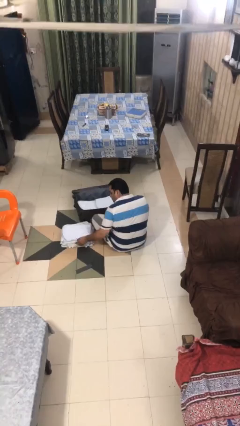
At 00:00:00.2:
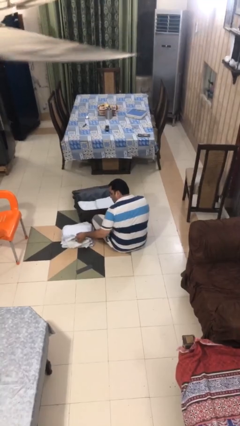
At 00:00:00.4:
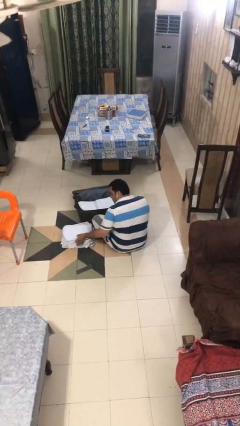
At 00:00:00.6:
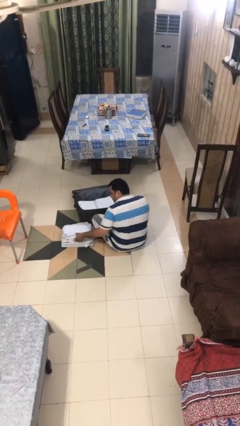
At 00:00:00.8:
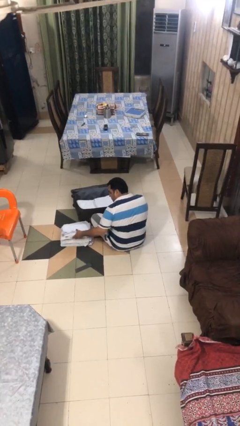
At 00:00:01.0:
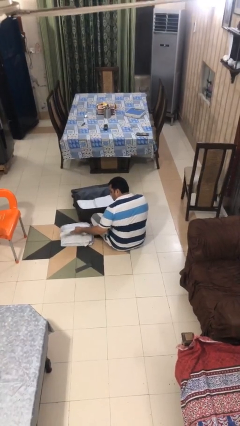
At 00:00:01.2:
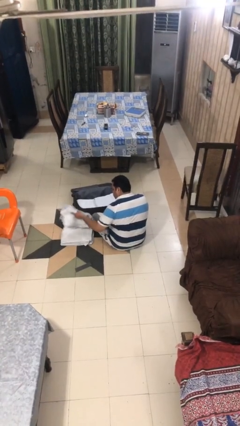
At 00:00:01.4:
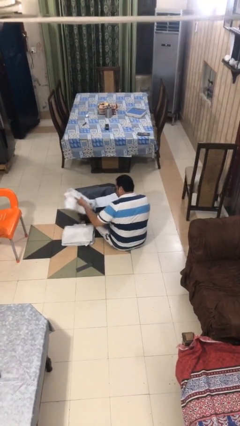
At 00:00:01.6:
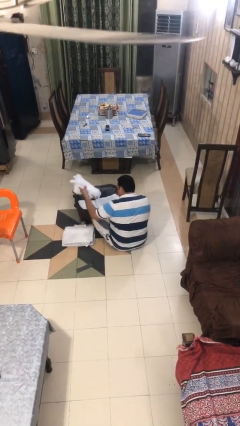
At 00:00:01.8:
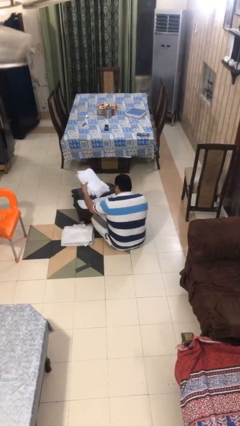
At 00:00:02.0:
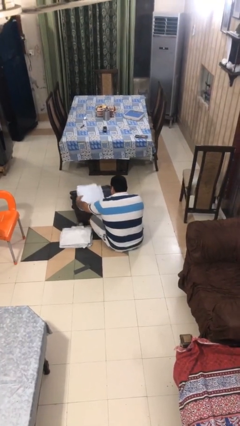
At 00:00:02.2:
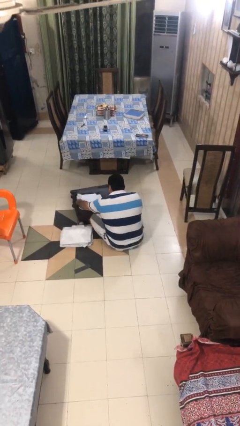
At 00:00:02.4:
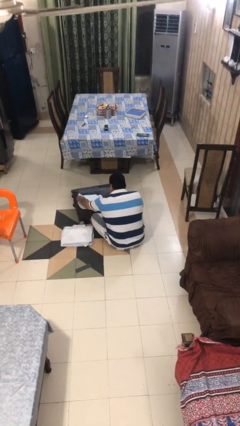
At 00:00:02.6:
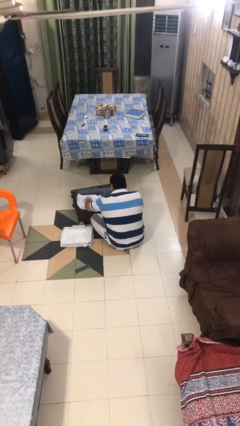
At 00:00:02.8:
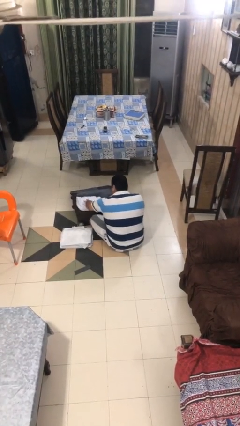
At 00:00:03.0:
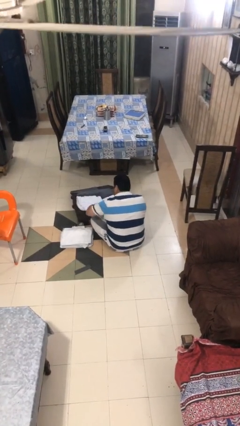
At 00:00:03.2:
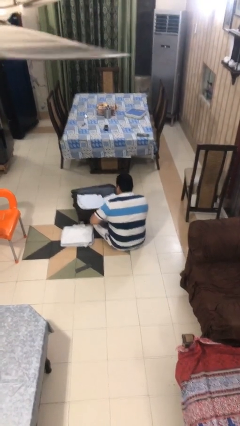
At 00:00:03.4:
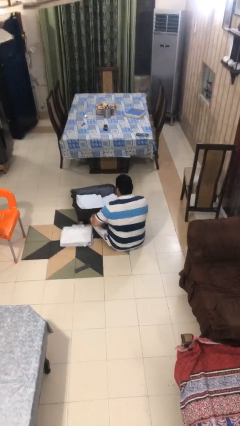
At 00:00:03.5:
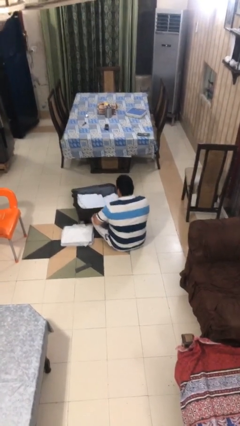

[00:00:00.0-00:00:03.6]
person loads clothes into suitcase

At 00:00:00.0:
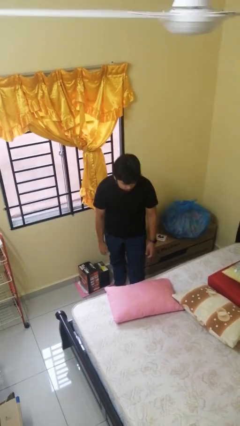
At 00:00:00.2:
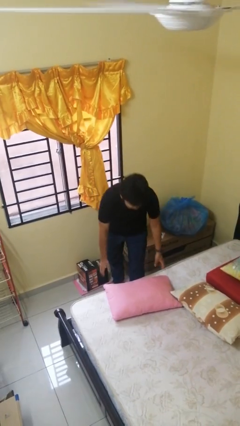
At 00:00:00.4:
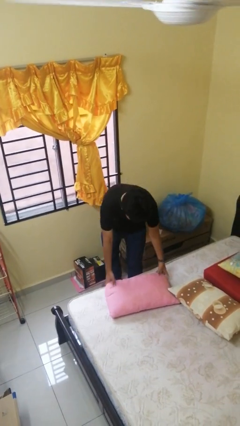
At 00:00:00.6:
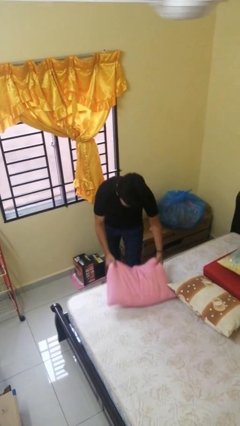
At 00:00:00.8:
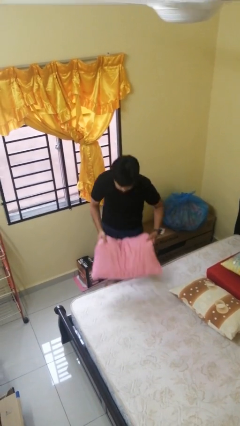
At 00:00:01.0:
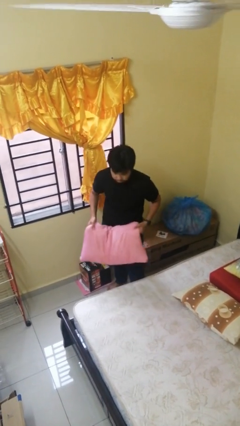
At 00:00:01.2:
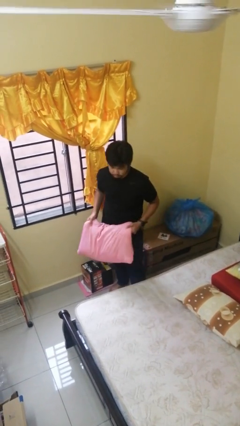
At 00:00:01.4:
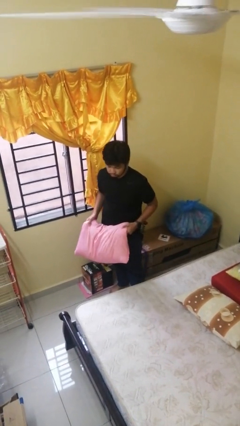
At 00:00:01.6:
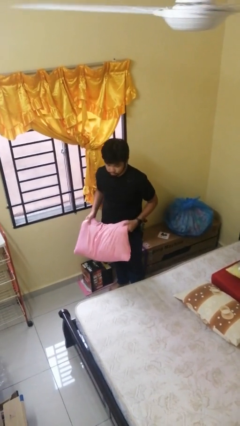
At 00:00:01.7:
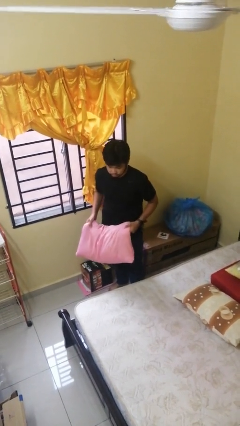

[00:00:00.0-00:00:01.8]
person picks up object from bed

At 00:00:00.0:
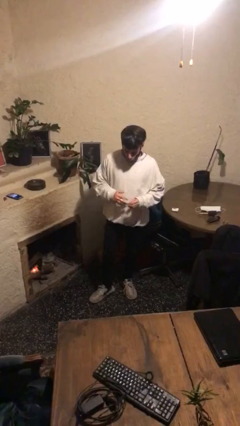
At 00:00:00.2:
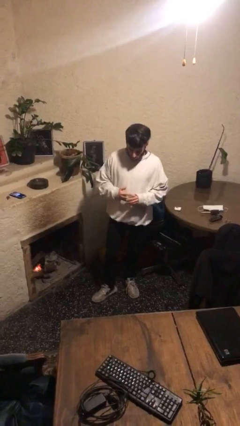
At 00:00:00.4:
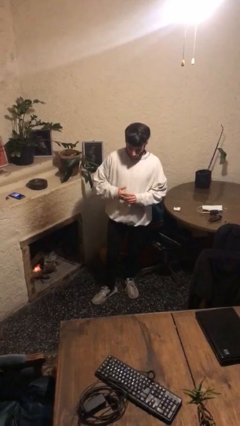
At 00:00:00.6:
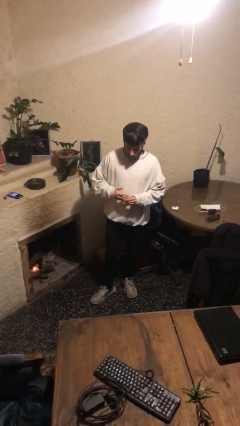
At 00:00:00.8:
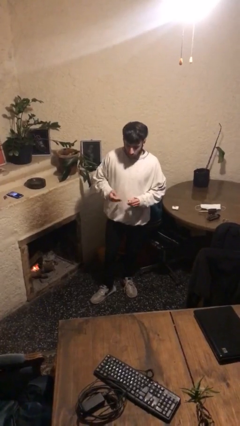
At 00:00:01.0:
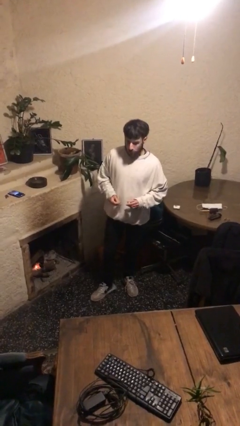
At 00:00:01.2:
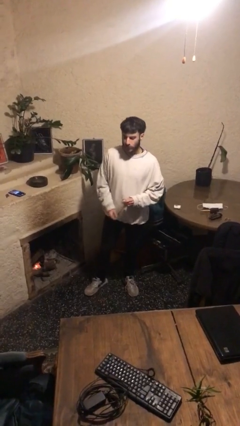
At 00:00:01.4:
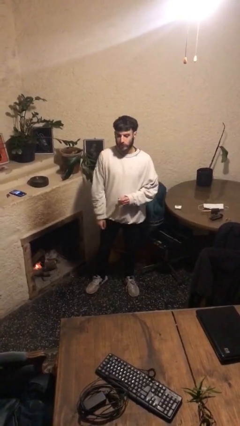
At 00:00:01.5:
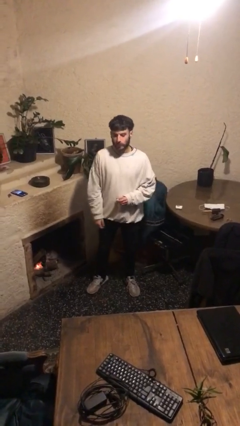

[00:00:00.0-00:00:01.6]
person takes off ring

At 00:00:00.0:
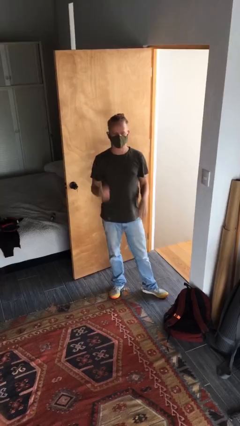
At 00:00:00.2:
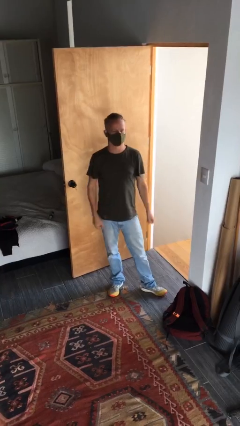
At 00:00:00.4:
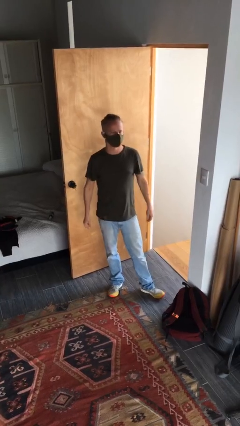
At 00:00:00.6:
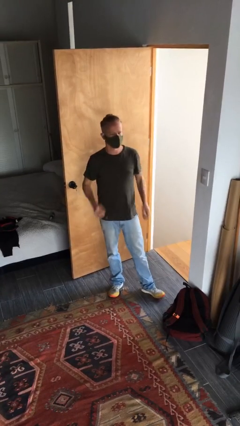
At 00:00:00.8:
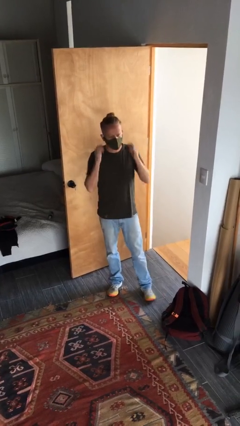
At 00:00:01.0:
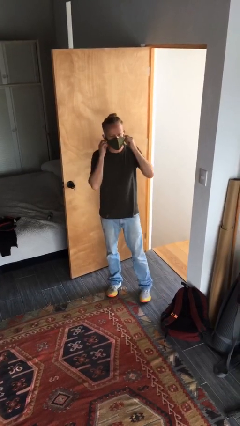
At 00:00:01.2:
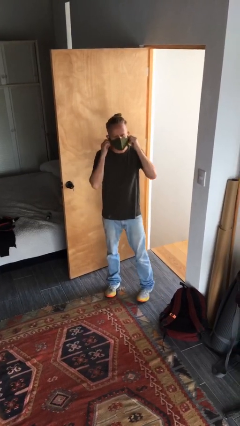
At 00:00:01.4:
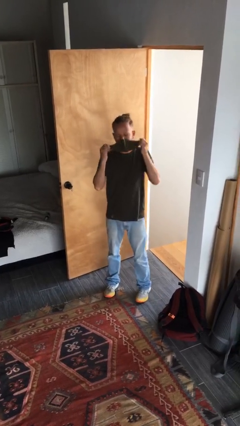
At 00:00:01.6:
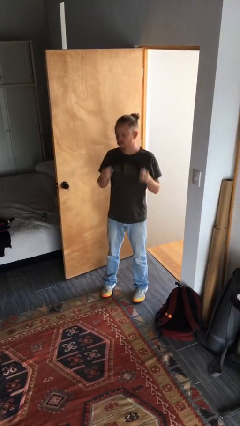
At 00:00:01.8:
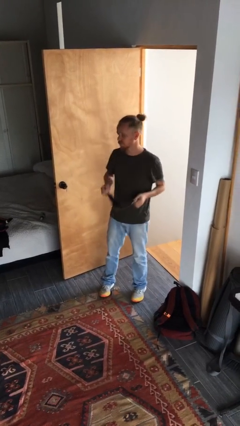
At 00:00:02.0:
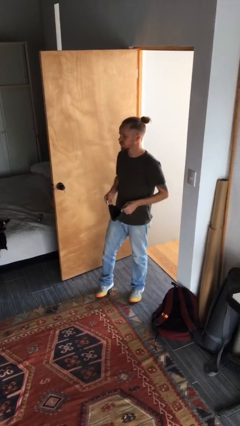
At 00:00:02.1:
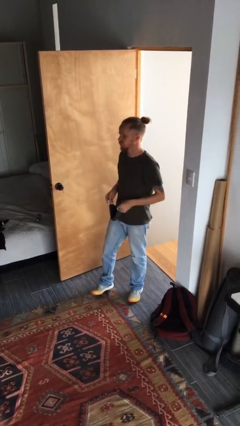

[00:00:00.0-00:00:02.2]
person takes off facemask

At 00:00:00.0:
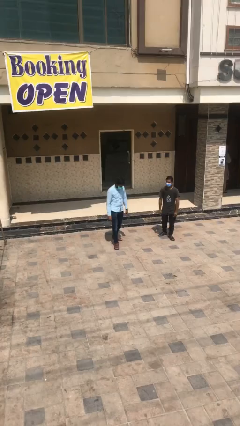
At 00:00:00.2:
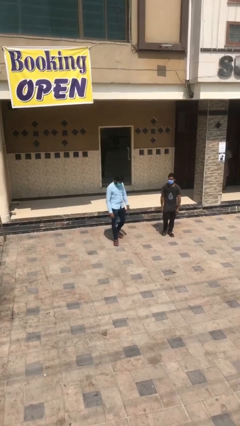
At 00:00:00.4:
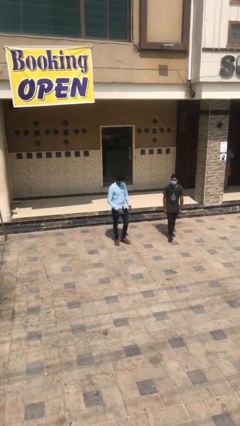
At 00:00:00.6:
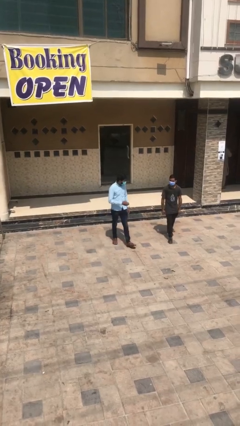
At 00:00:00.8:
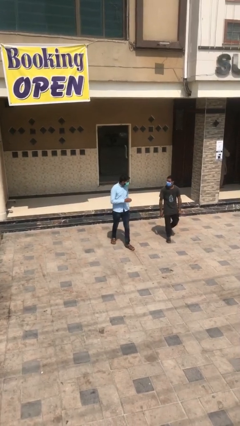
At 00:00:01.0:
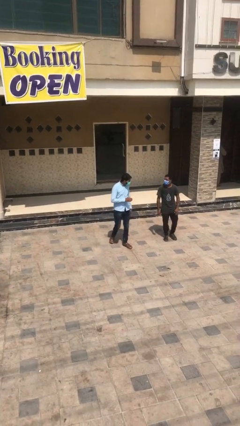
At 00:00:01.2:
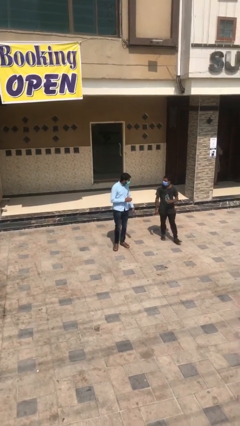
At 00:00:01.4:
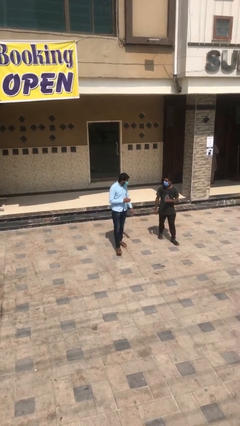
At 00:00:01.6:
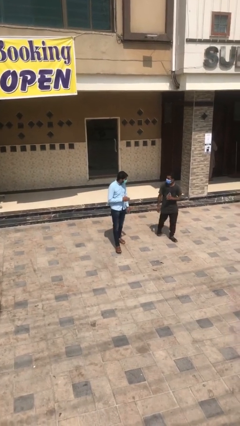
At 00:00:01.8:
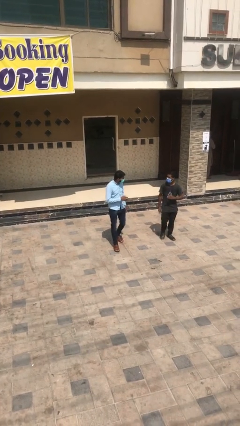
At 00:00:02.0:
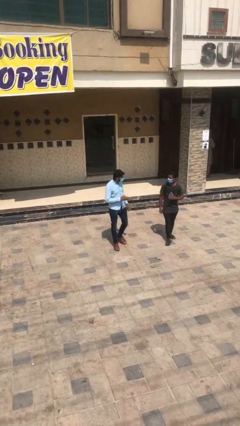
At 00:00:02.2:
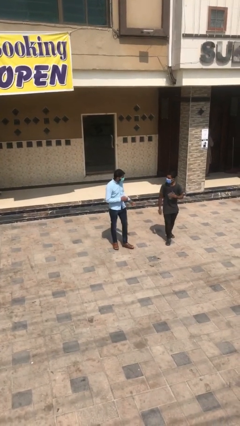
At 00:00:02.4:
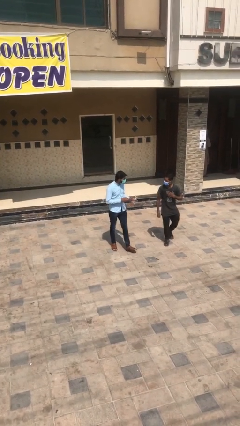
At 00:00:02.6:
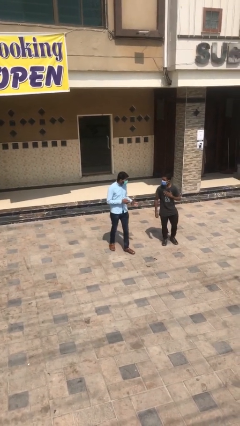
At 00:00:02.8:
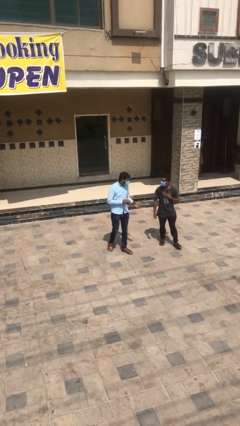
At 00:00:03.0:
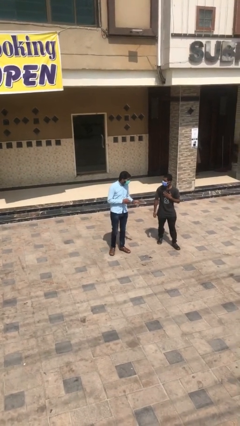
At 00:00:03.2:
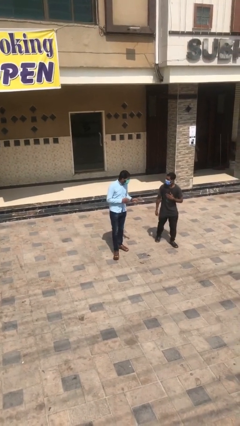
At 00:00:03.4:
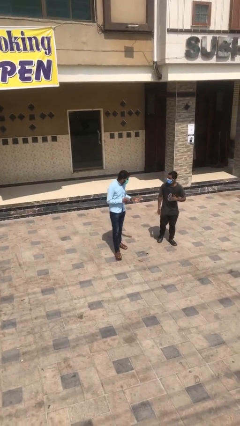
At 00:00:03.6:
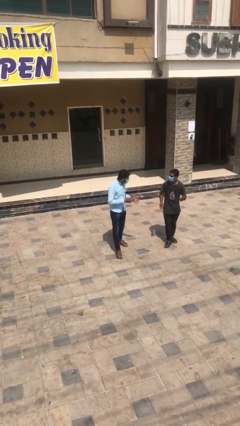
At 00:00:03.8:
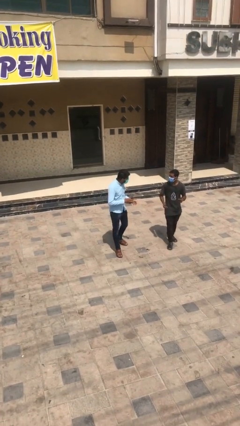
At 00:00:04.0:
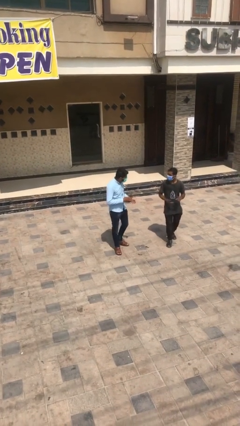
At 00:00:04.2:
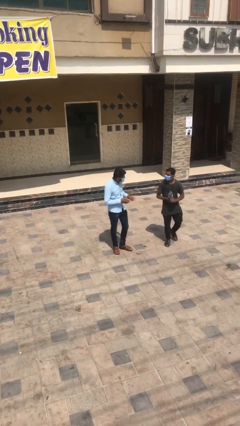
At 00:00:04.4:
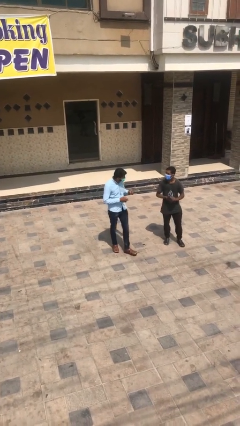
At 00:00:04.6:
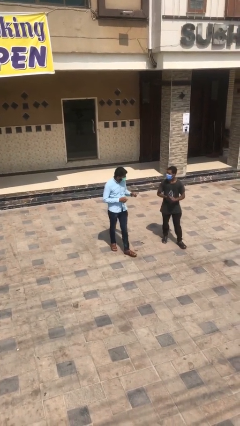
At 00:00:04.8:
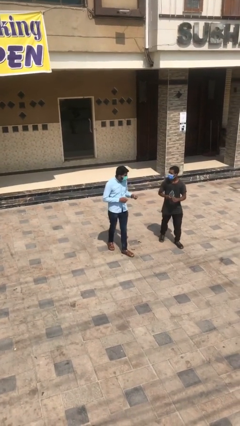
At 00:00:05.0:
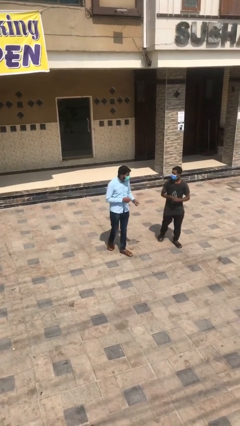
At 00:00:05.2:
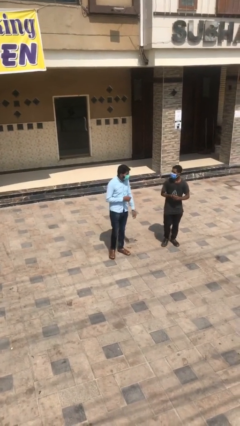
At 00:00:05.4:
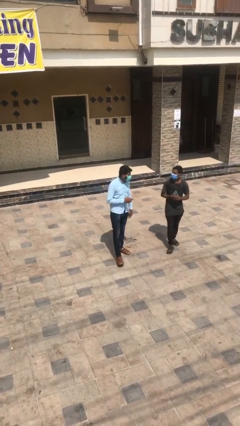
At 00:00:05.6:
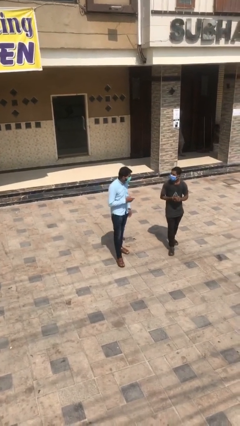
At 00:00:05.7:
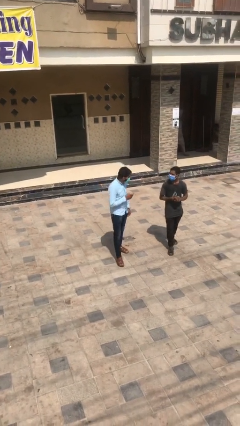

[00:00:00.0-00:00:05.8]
person talks to person

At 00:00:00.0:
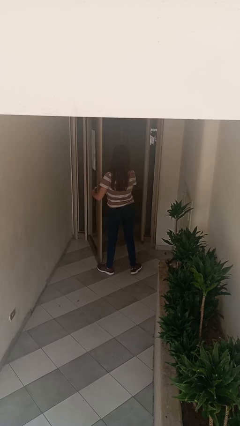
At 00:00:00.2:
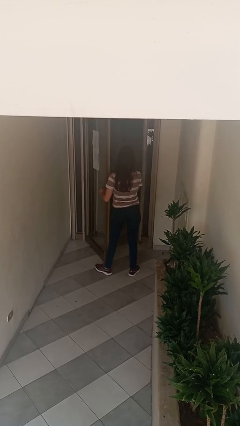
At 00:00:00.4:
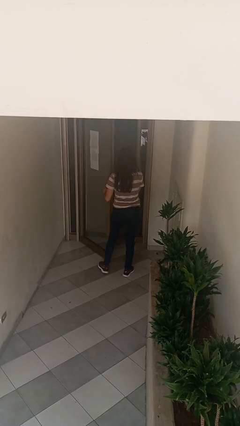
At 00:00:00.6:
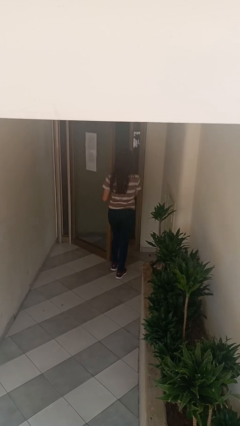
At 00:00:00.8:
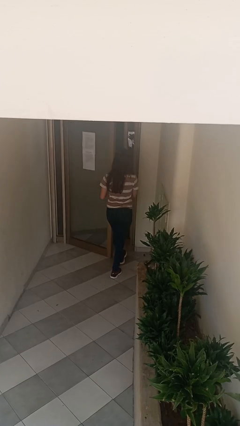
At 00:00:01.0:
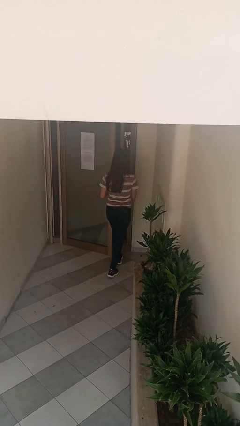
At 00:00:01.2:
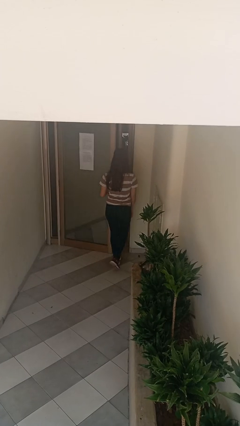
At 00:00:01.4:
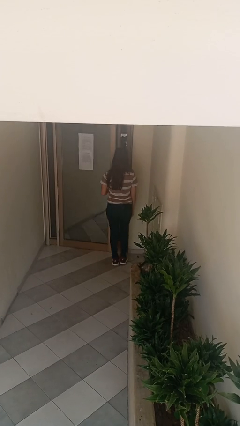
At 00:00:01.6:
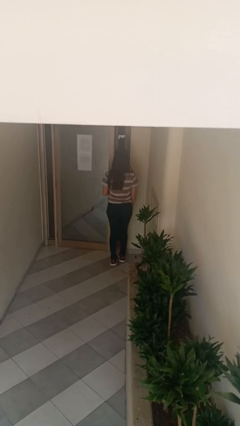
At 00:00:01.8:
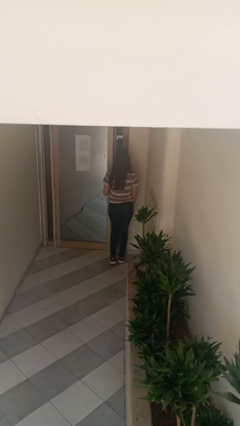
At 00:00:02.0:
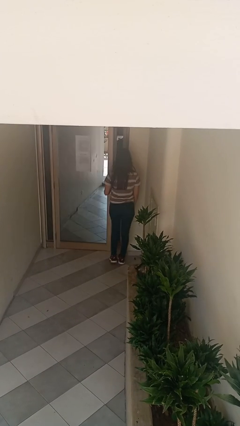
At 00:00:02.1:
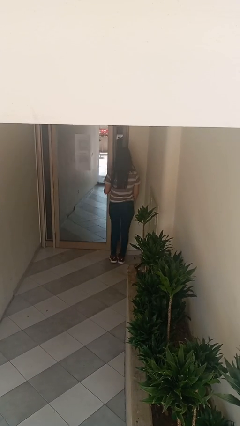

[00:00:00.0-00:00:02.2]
person closes facility door
